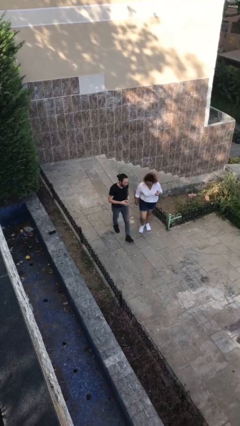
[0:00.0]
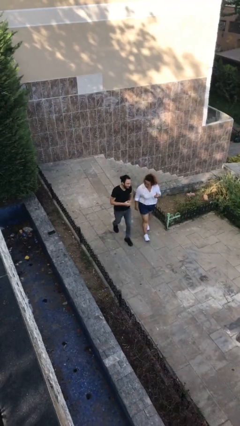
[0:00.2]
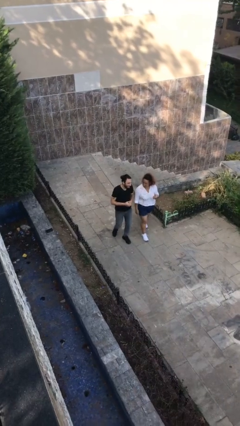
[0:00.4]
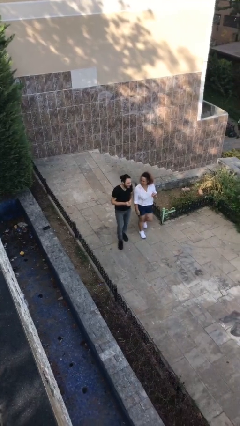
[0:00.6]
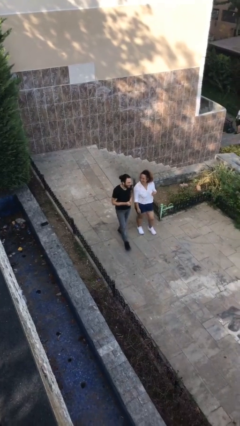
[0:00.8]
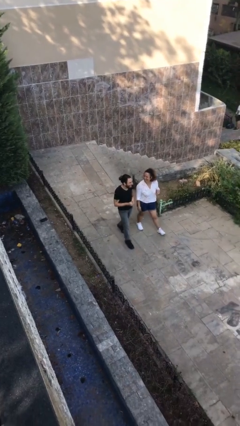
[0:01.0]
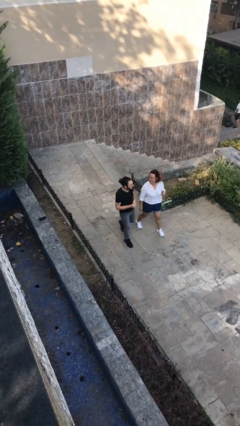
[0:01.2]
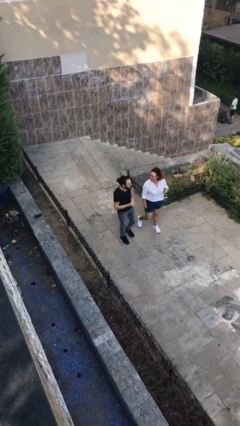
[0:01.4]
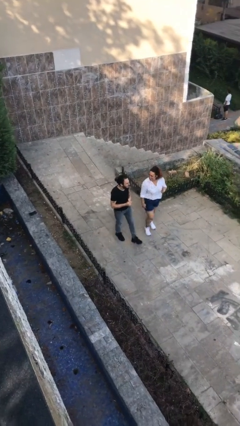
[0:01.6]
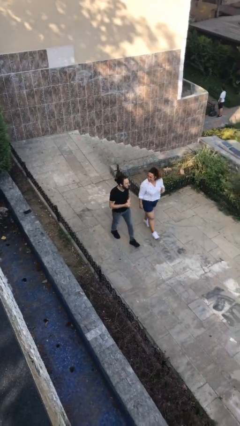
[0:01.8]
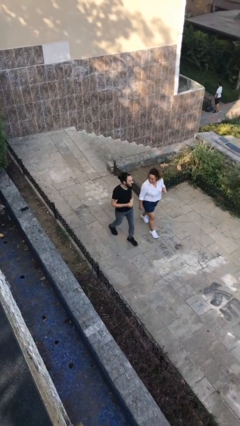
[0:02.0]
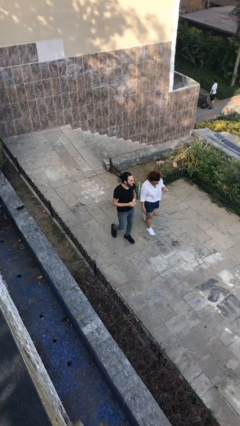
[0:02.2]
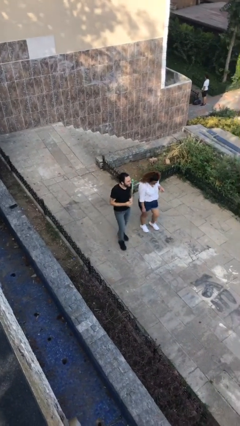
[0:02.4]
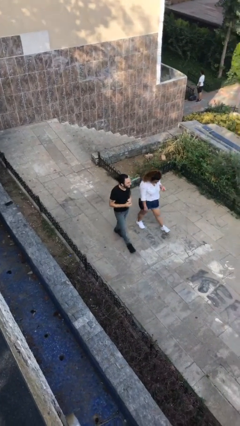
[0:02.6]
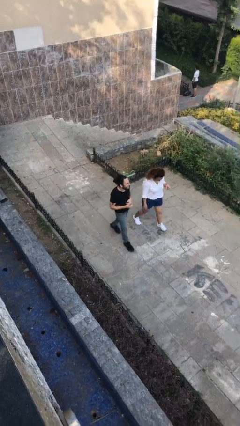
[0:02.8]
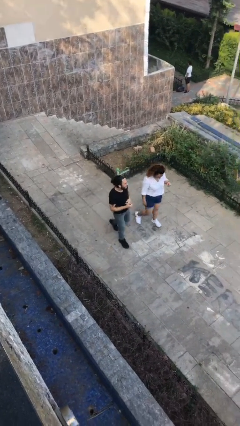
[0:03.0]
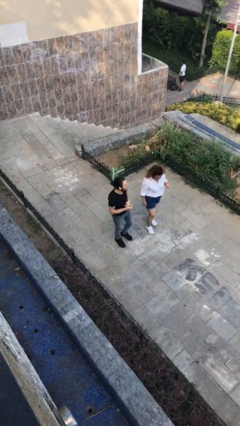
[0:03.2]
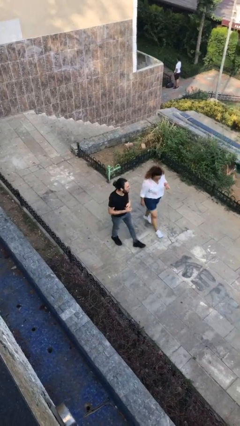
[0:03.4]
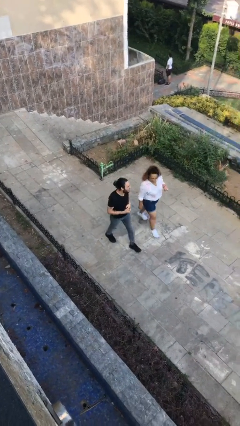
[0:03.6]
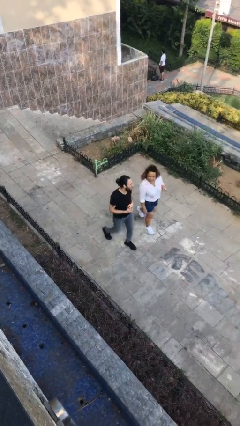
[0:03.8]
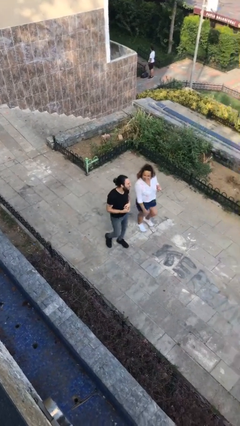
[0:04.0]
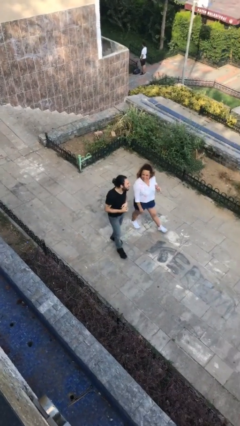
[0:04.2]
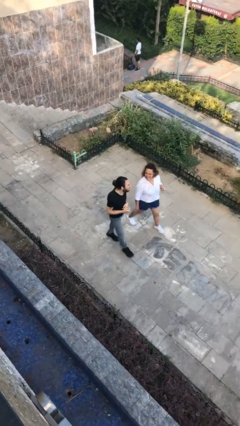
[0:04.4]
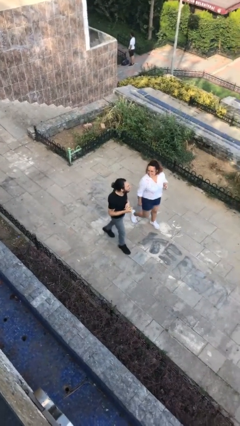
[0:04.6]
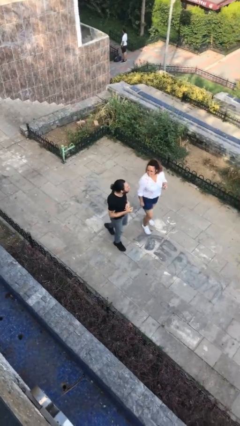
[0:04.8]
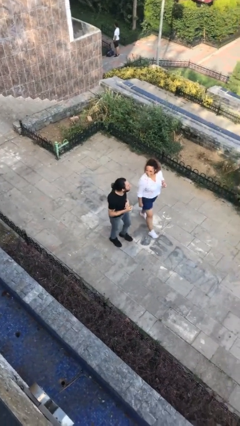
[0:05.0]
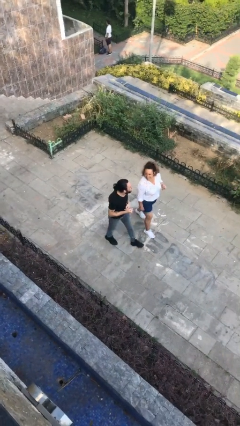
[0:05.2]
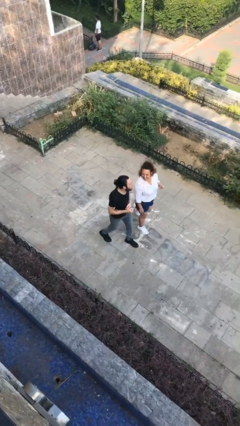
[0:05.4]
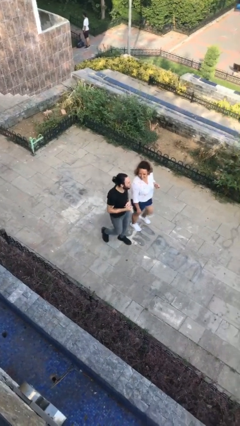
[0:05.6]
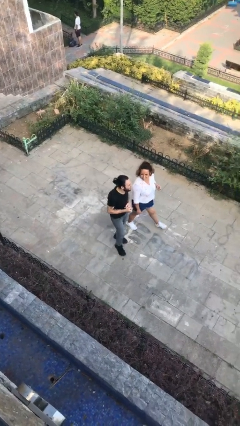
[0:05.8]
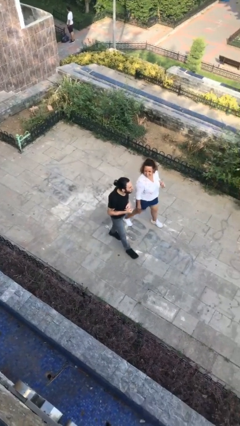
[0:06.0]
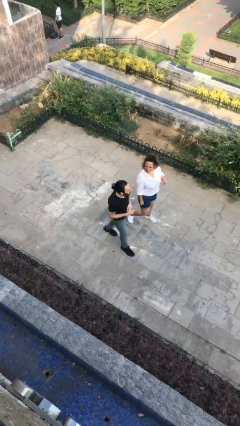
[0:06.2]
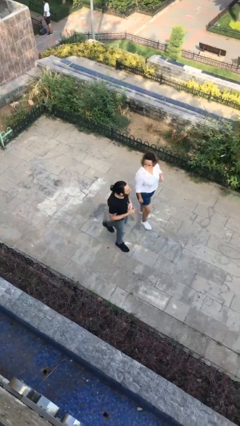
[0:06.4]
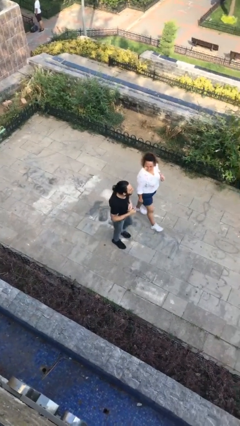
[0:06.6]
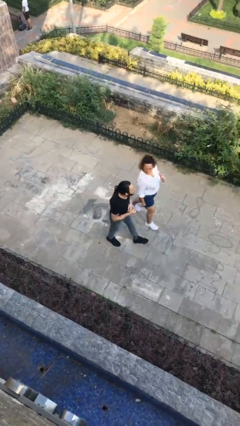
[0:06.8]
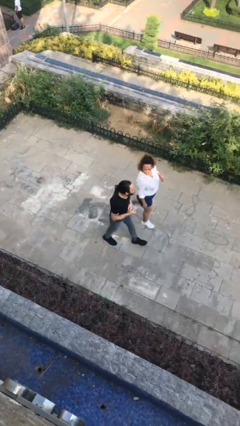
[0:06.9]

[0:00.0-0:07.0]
person talks to person

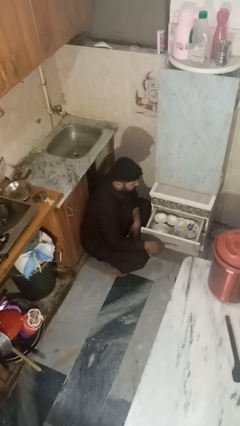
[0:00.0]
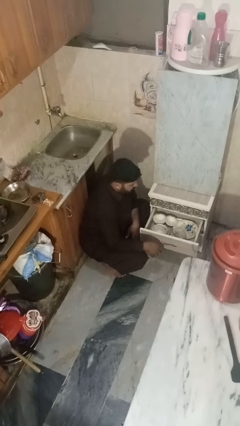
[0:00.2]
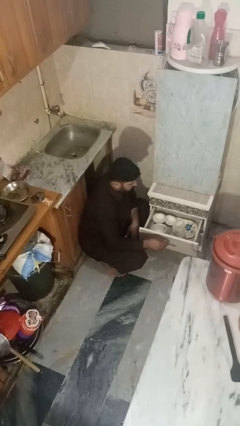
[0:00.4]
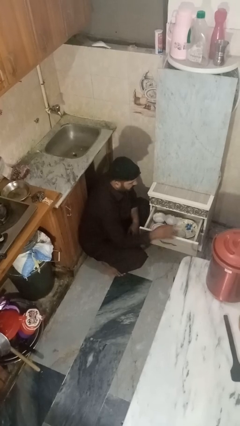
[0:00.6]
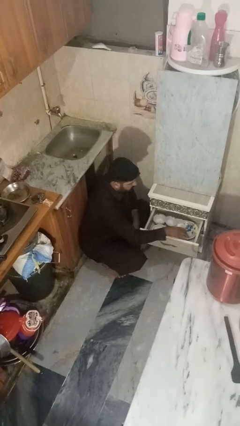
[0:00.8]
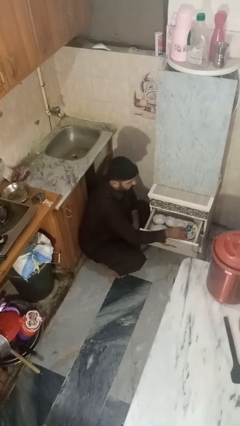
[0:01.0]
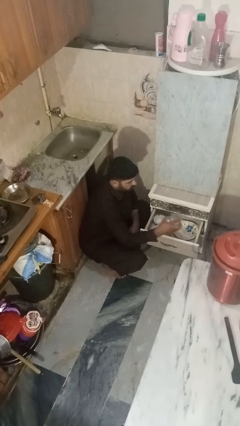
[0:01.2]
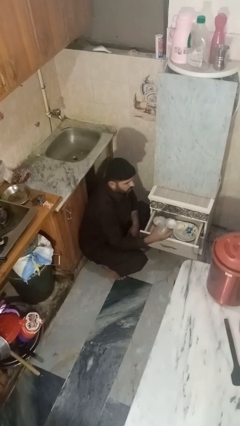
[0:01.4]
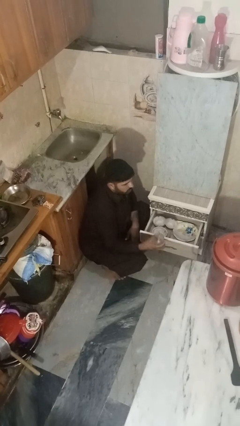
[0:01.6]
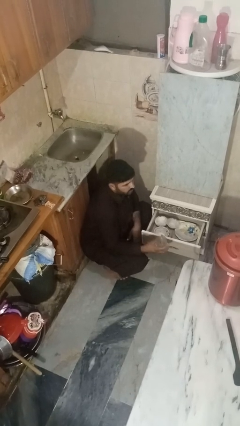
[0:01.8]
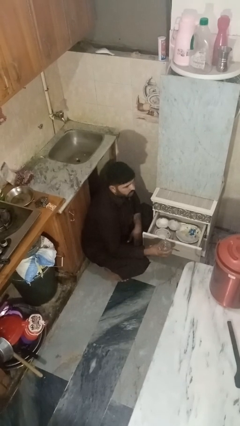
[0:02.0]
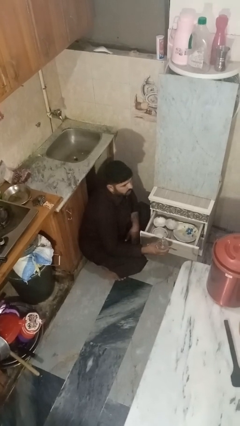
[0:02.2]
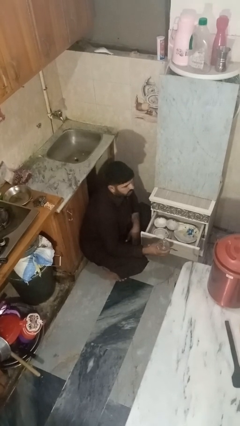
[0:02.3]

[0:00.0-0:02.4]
person takes object from kitchen drawer

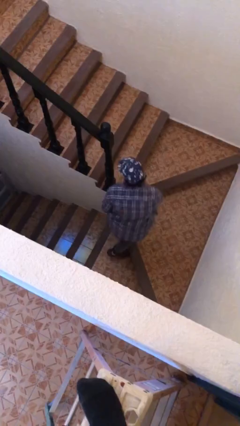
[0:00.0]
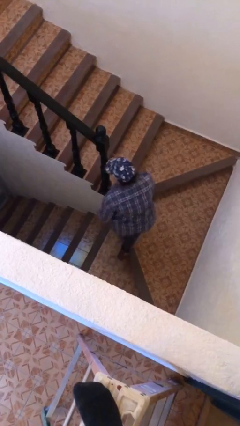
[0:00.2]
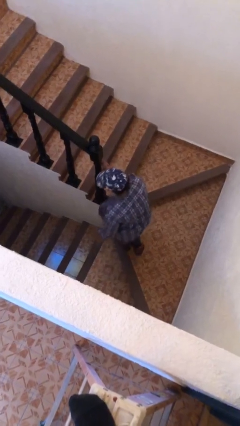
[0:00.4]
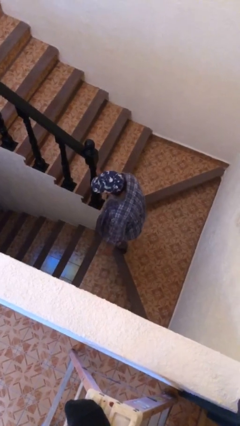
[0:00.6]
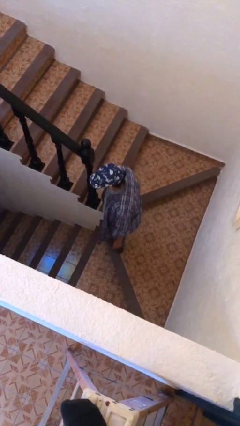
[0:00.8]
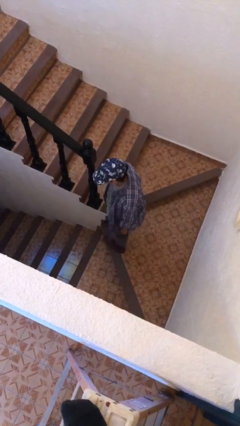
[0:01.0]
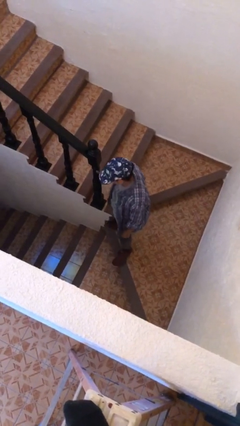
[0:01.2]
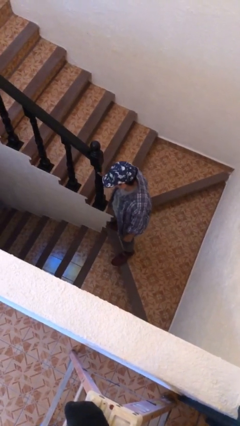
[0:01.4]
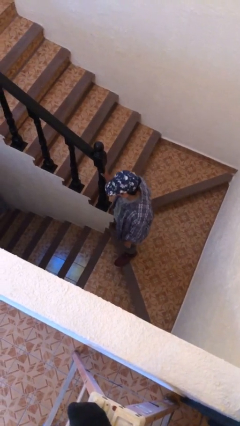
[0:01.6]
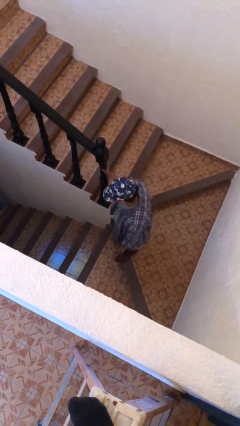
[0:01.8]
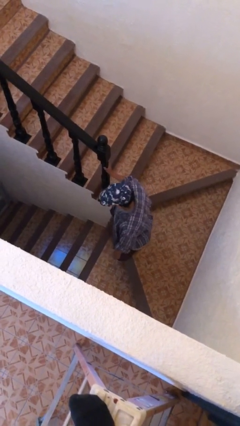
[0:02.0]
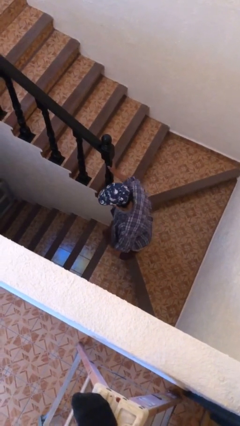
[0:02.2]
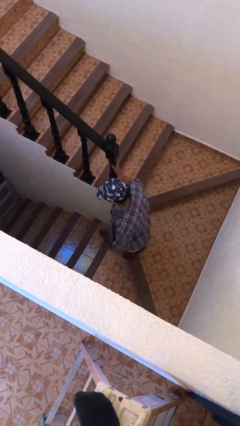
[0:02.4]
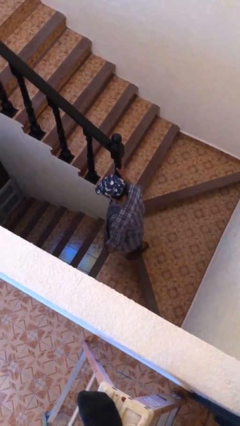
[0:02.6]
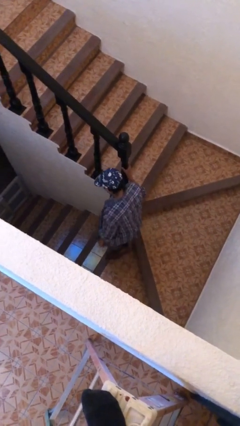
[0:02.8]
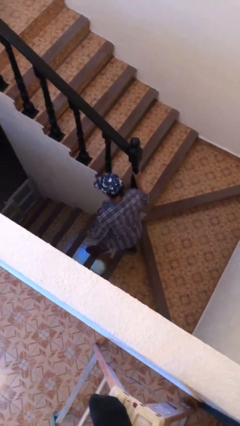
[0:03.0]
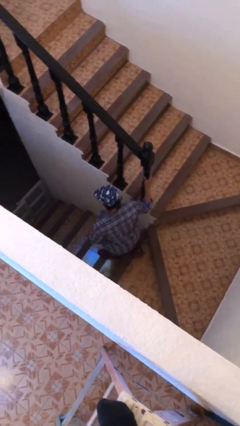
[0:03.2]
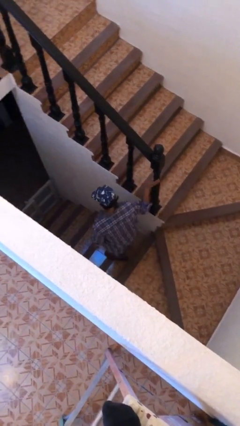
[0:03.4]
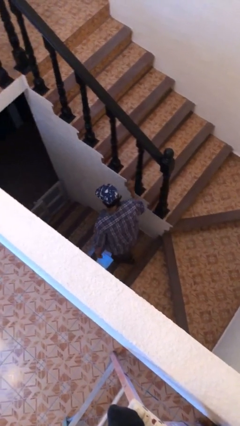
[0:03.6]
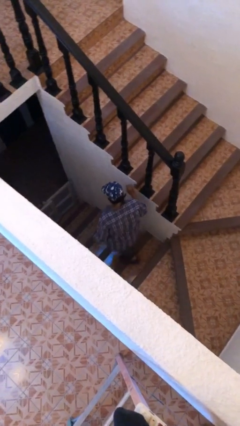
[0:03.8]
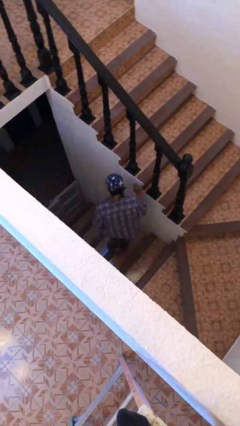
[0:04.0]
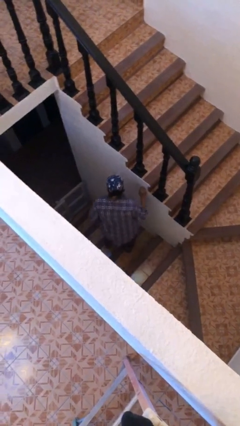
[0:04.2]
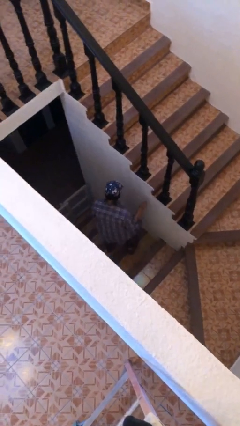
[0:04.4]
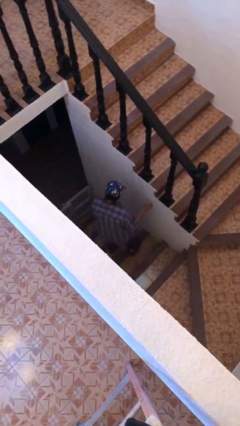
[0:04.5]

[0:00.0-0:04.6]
person climbs down stairs

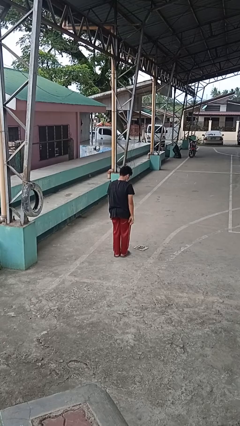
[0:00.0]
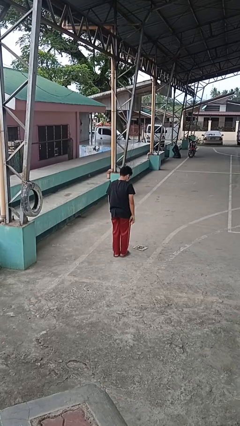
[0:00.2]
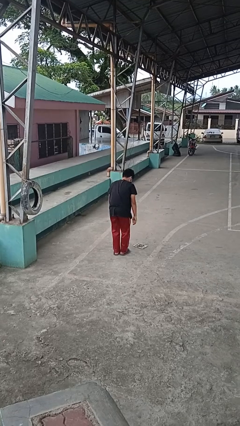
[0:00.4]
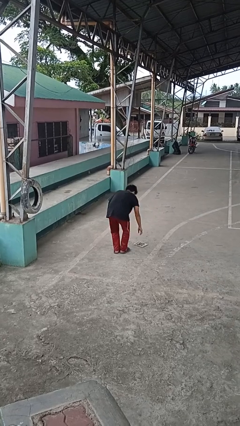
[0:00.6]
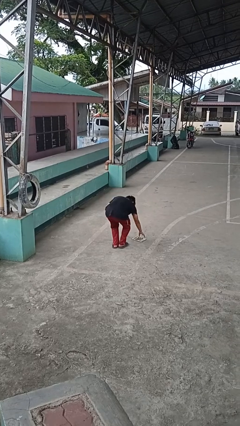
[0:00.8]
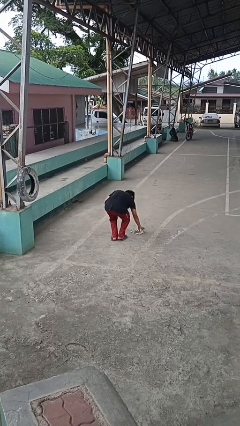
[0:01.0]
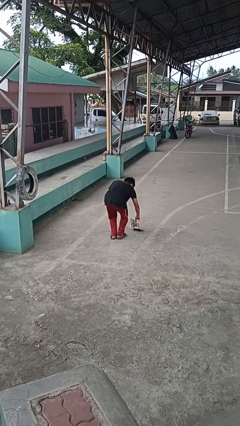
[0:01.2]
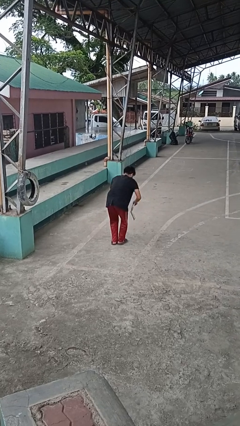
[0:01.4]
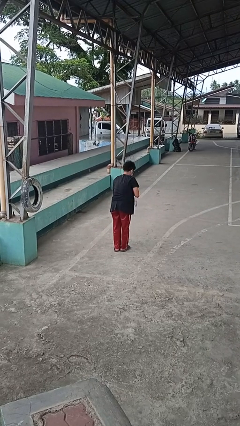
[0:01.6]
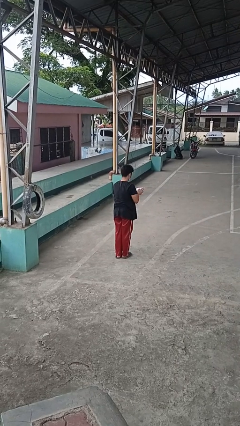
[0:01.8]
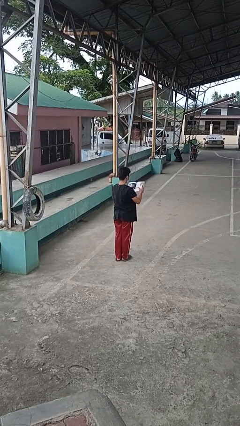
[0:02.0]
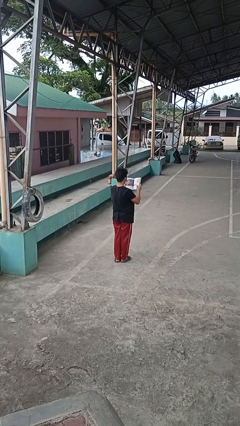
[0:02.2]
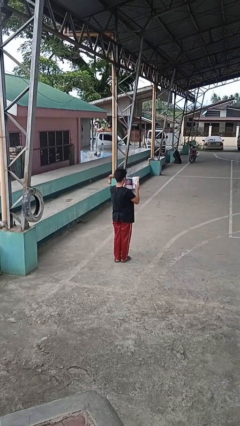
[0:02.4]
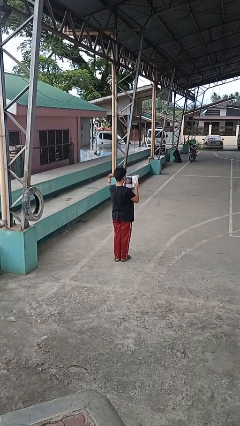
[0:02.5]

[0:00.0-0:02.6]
person picks up object from floor

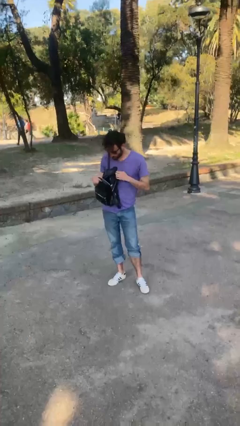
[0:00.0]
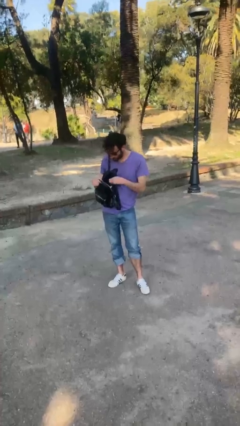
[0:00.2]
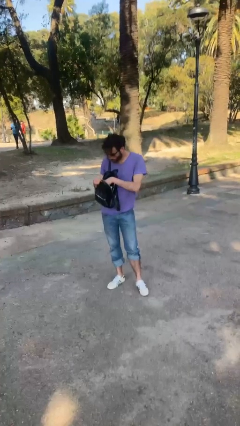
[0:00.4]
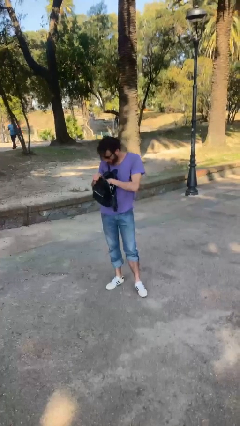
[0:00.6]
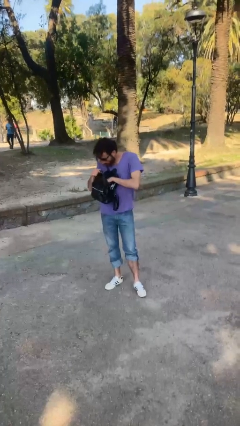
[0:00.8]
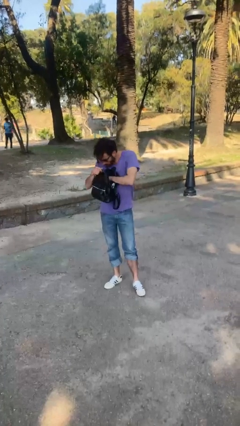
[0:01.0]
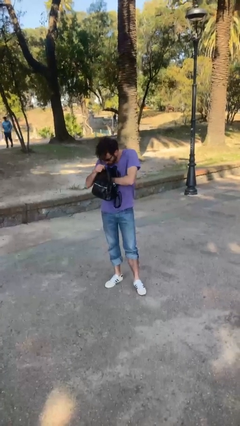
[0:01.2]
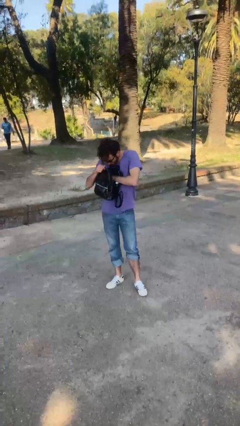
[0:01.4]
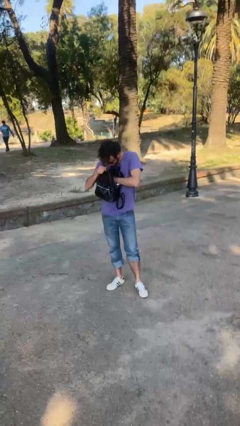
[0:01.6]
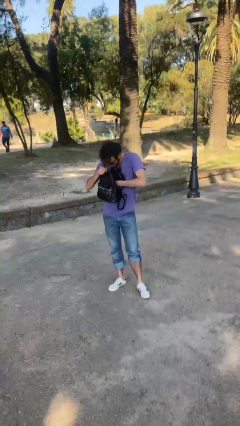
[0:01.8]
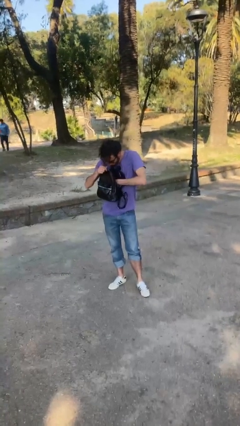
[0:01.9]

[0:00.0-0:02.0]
person searches in purse
